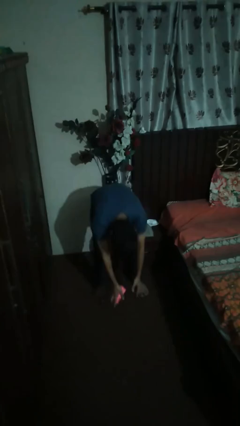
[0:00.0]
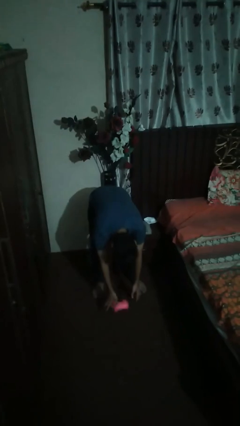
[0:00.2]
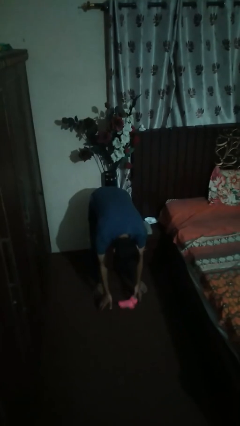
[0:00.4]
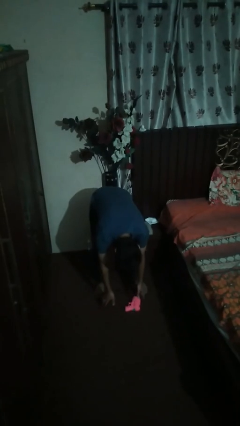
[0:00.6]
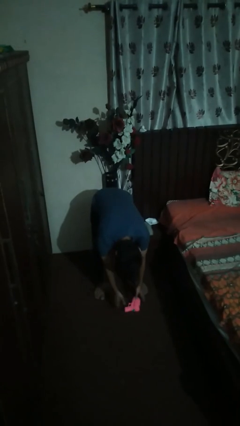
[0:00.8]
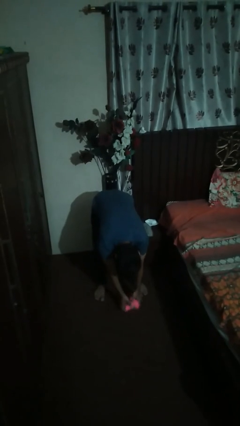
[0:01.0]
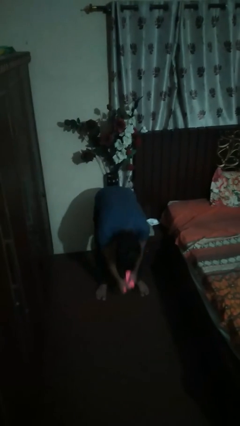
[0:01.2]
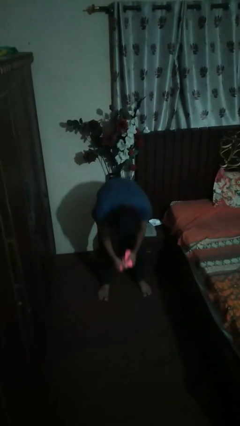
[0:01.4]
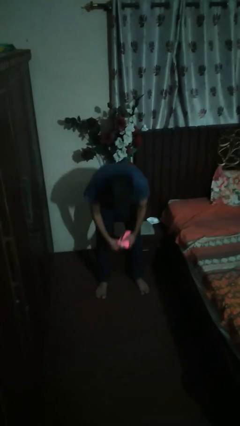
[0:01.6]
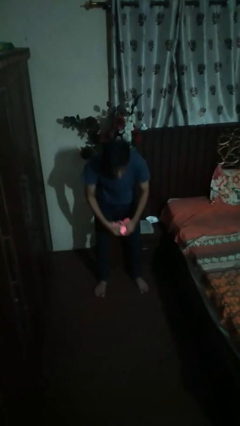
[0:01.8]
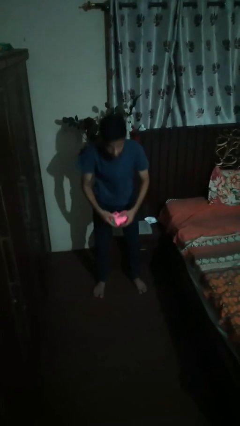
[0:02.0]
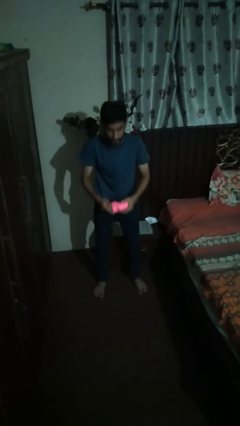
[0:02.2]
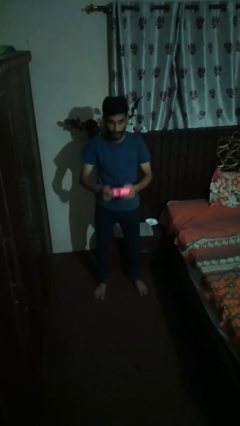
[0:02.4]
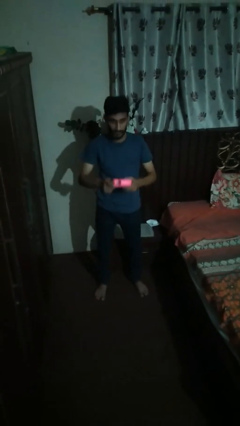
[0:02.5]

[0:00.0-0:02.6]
person picks up object from floor

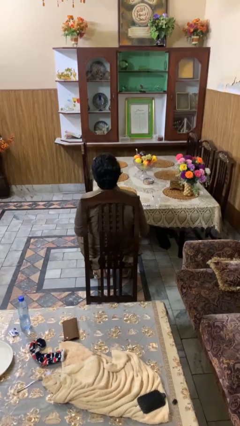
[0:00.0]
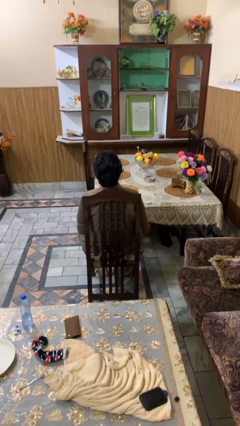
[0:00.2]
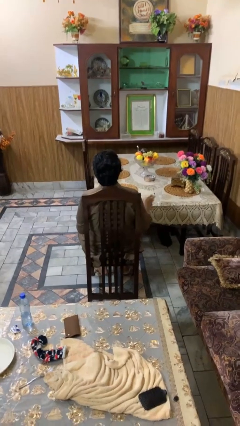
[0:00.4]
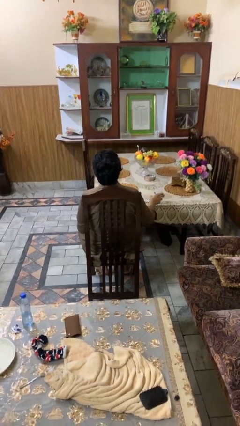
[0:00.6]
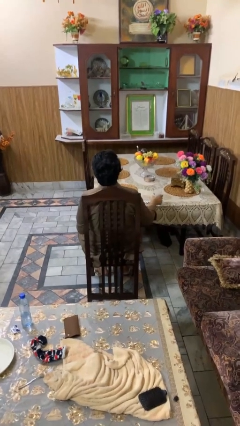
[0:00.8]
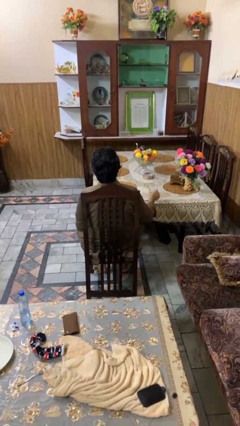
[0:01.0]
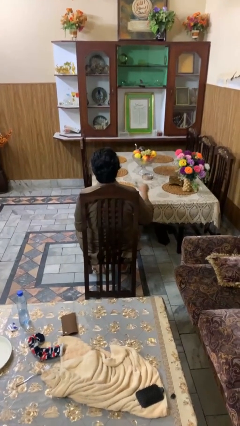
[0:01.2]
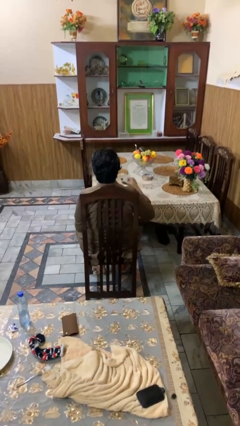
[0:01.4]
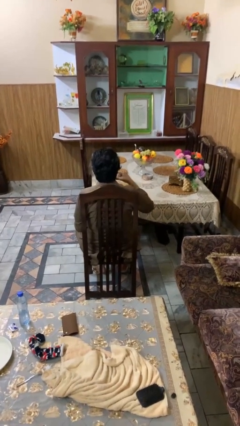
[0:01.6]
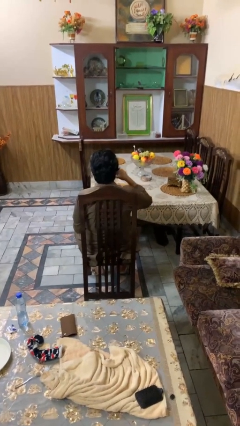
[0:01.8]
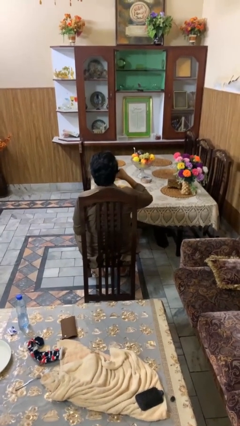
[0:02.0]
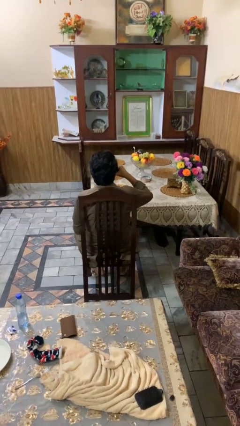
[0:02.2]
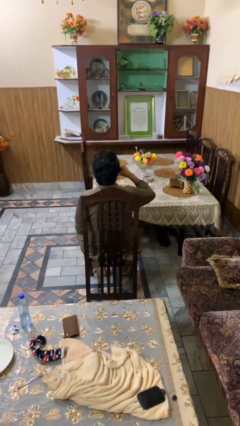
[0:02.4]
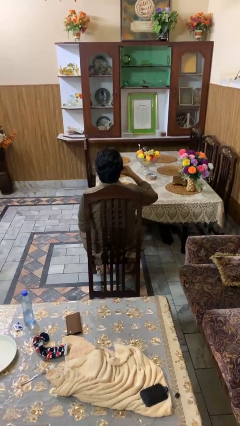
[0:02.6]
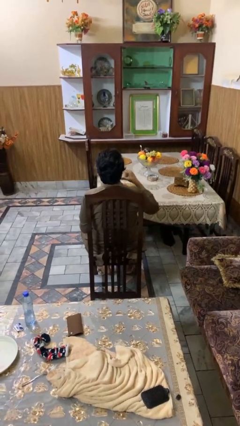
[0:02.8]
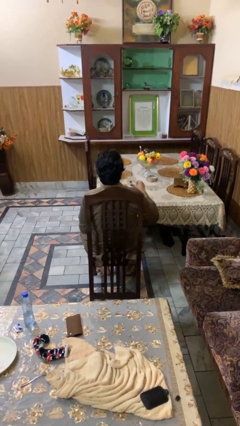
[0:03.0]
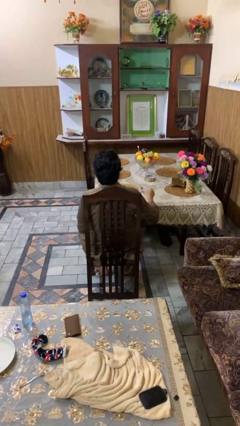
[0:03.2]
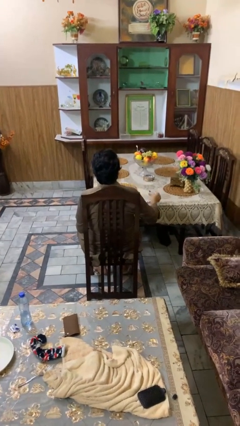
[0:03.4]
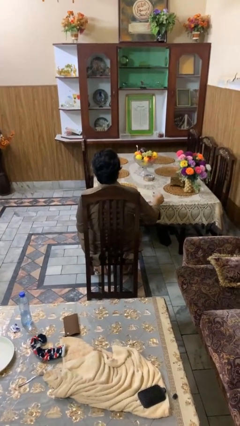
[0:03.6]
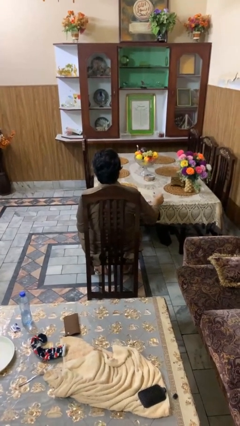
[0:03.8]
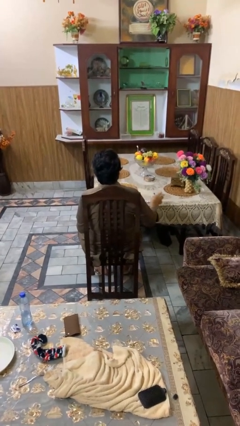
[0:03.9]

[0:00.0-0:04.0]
person drinks from cup

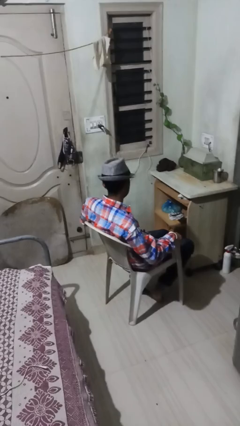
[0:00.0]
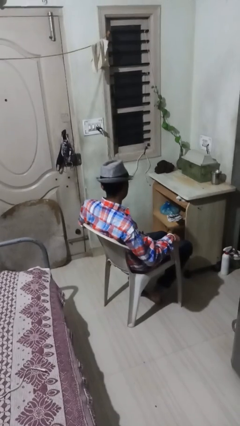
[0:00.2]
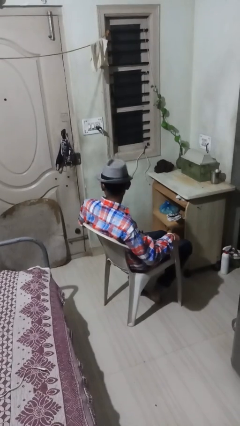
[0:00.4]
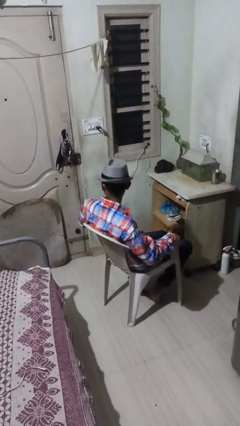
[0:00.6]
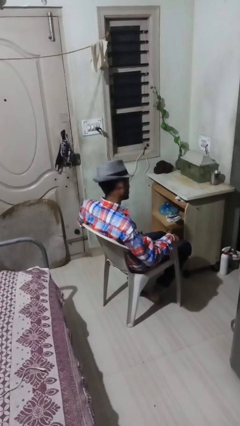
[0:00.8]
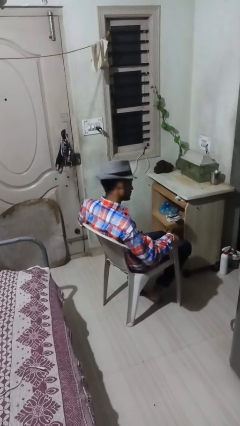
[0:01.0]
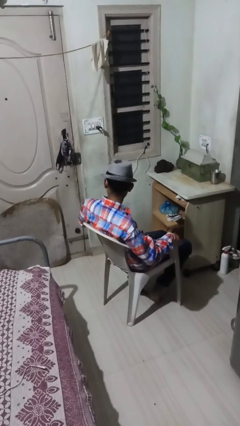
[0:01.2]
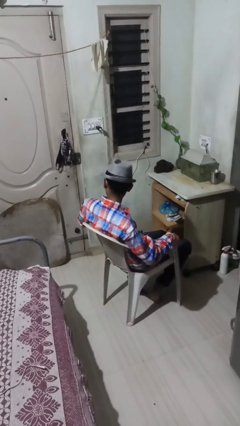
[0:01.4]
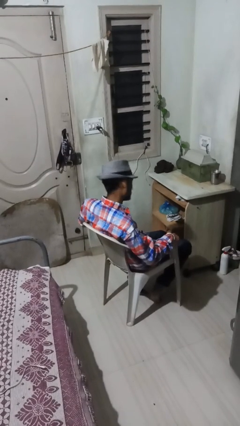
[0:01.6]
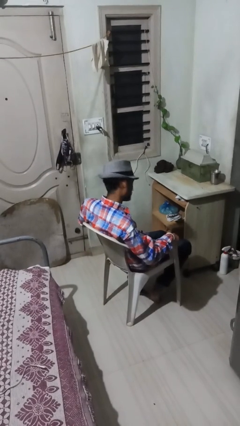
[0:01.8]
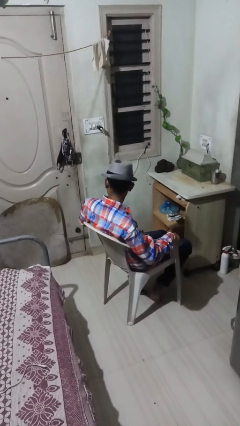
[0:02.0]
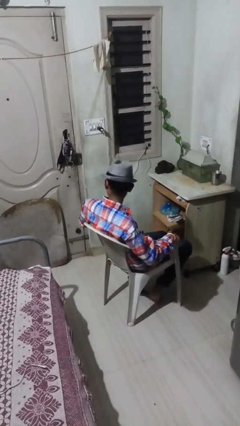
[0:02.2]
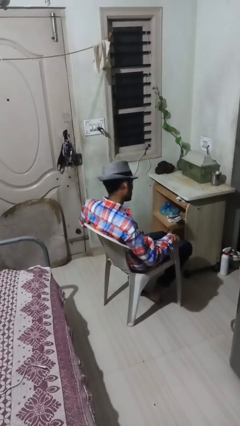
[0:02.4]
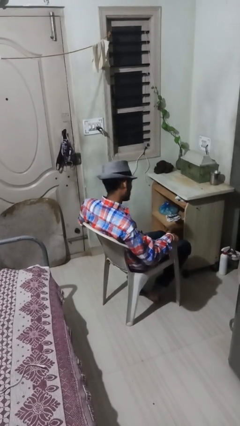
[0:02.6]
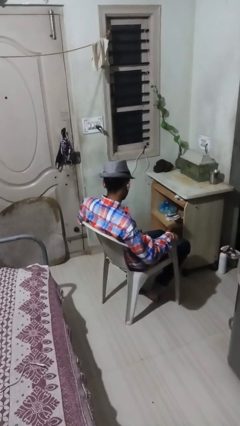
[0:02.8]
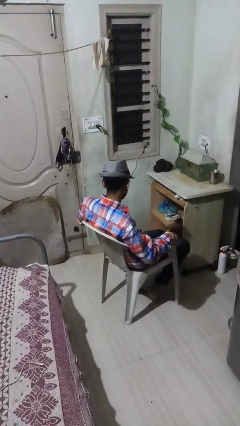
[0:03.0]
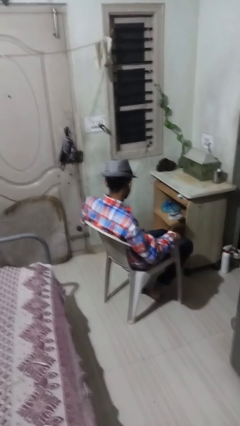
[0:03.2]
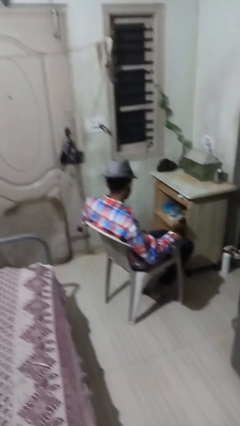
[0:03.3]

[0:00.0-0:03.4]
person shakes head

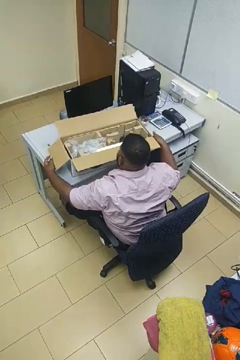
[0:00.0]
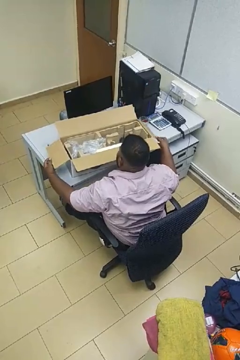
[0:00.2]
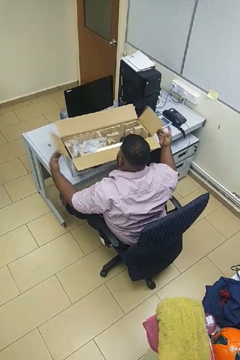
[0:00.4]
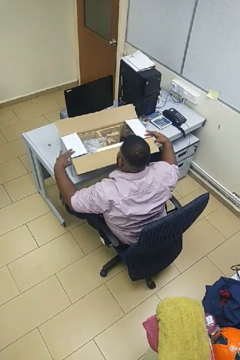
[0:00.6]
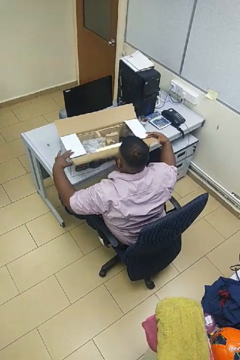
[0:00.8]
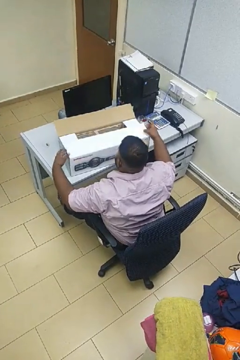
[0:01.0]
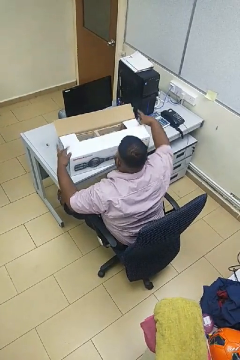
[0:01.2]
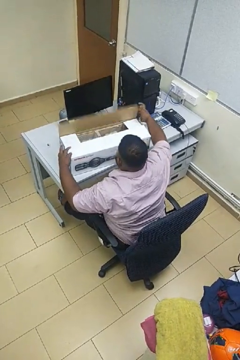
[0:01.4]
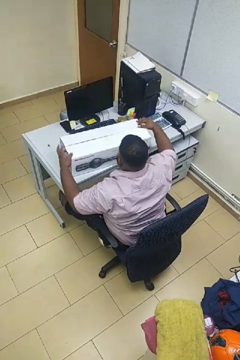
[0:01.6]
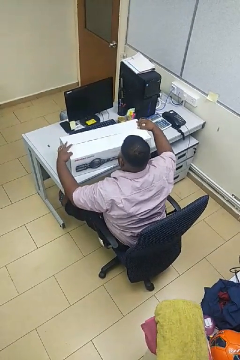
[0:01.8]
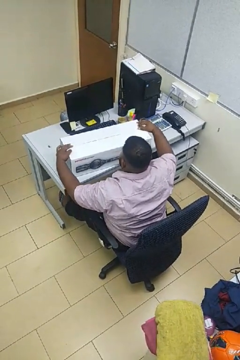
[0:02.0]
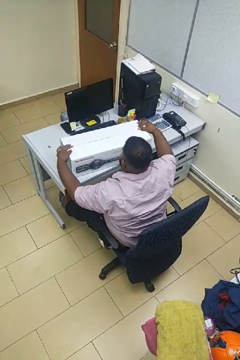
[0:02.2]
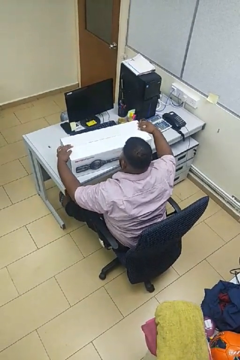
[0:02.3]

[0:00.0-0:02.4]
person closes box

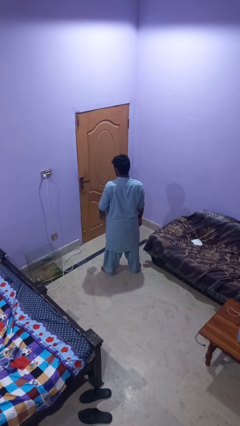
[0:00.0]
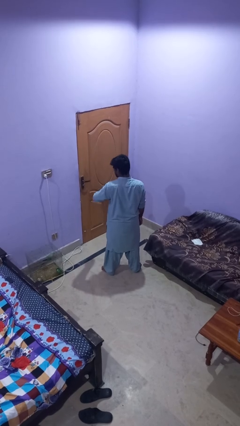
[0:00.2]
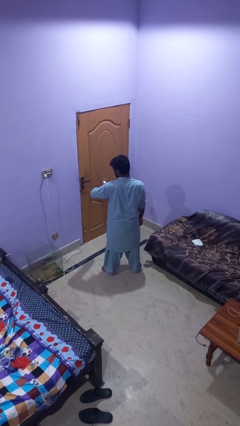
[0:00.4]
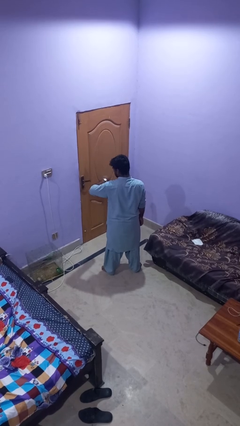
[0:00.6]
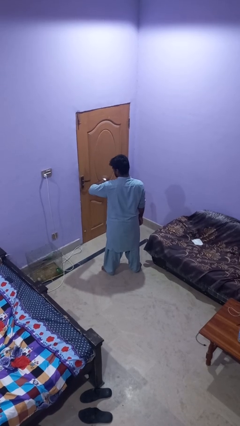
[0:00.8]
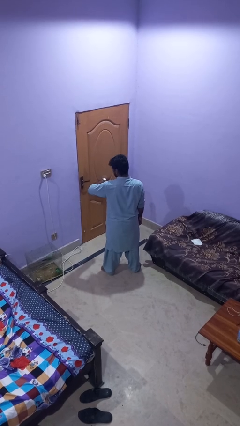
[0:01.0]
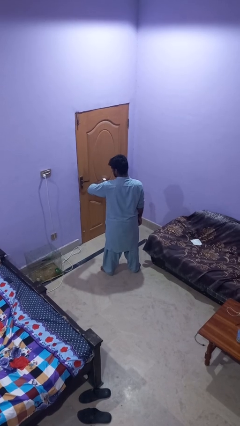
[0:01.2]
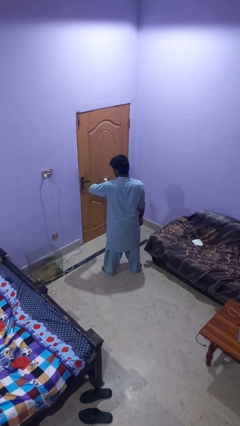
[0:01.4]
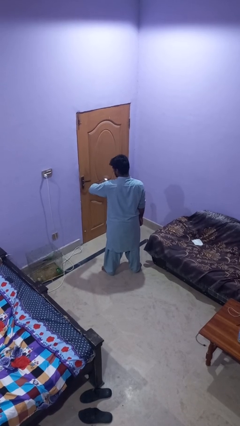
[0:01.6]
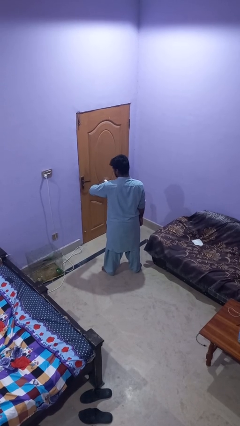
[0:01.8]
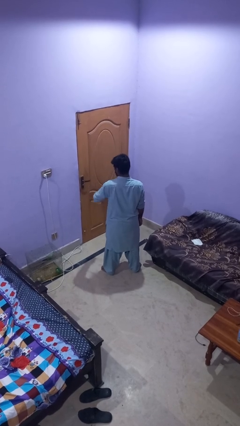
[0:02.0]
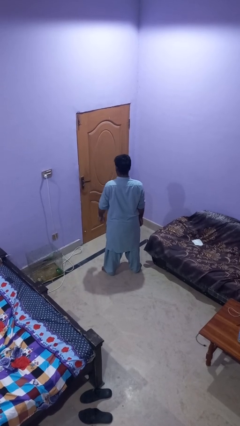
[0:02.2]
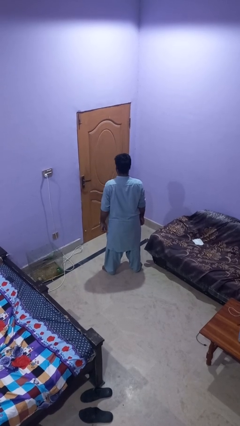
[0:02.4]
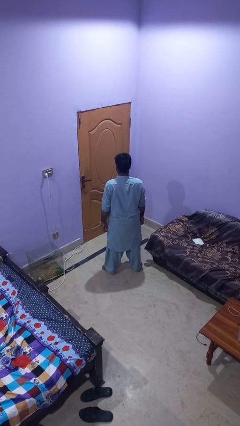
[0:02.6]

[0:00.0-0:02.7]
person looks at wristwatch

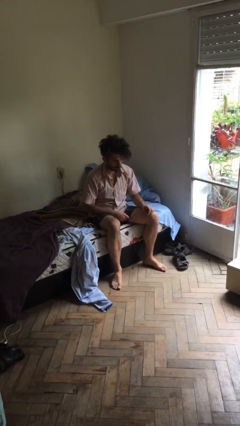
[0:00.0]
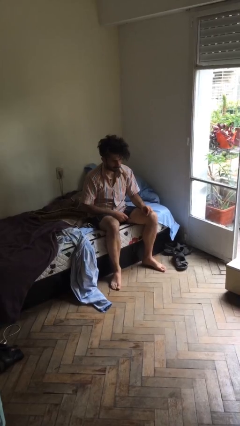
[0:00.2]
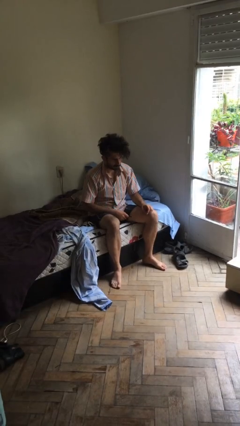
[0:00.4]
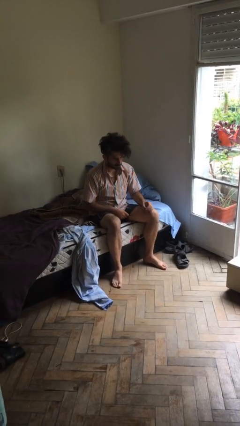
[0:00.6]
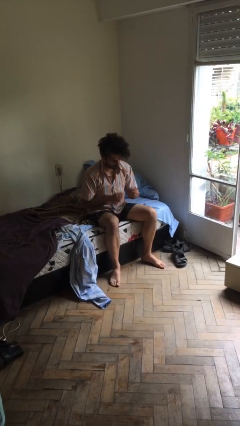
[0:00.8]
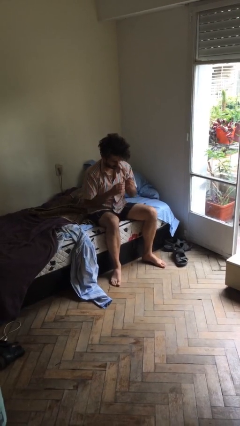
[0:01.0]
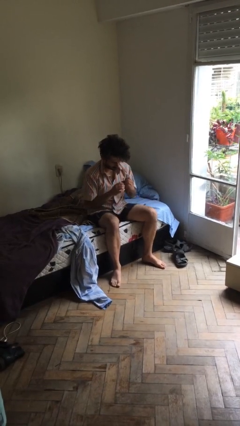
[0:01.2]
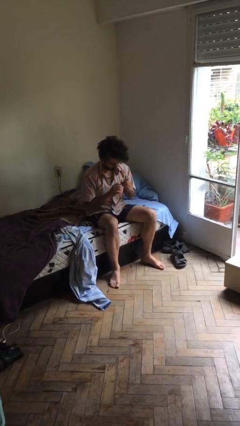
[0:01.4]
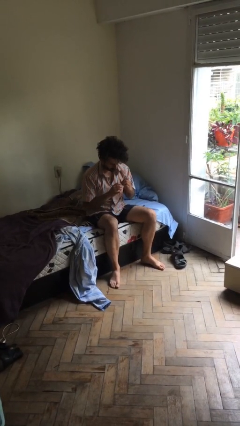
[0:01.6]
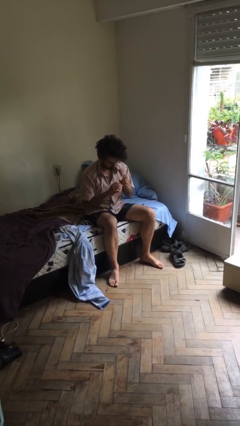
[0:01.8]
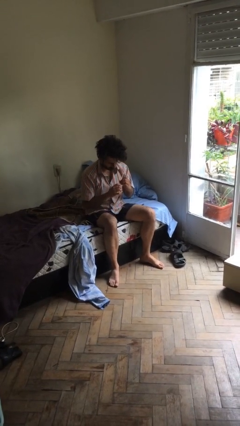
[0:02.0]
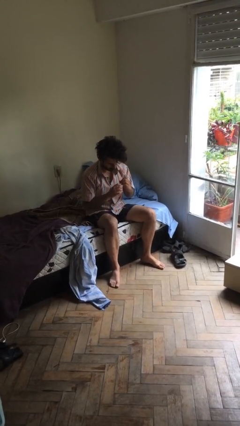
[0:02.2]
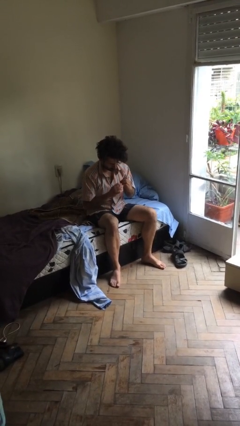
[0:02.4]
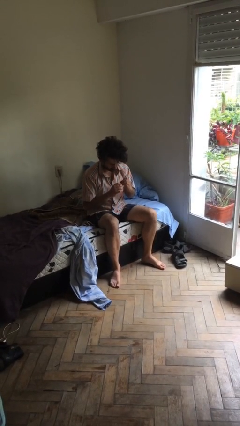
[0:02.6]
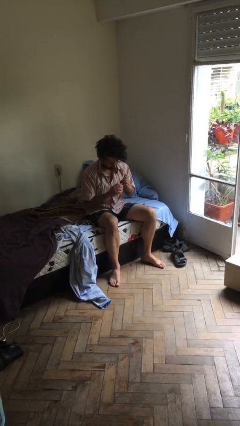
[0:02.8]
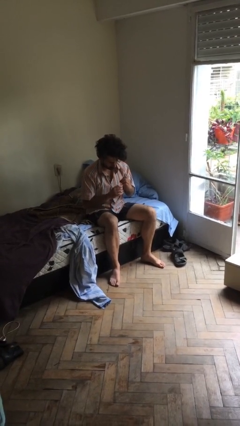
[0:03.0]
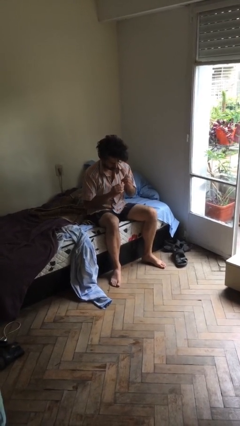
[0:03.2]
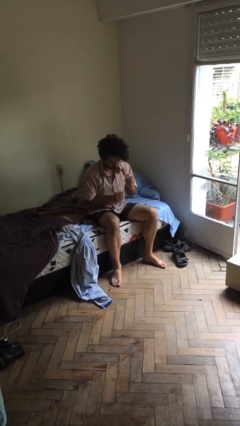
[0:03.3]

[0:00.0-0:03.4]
person files fingernails
